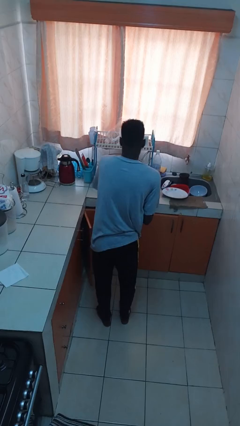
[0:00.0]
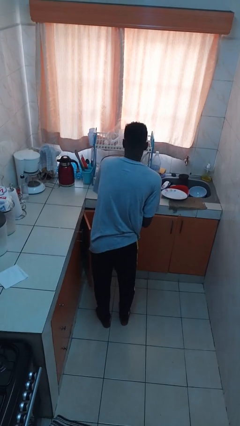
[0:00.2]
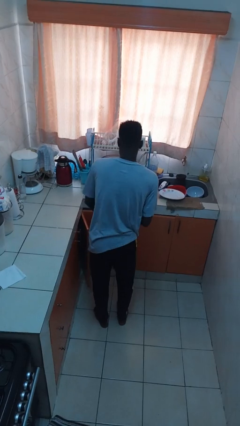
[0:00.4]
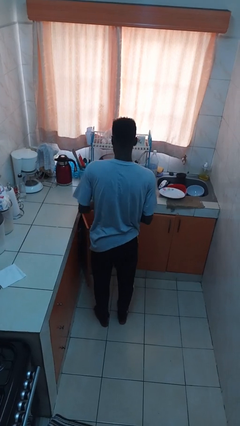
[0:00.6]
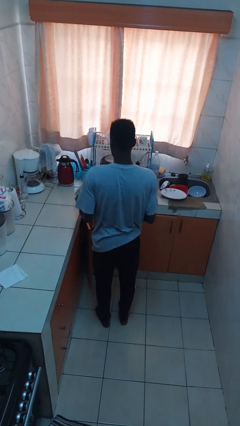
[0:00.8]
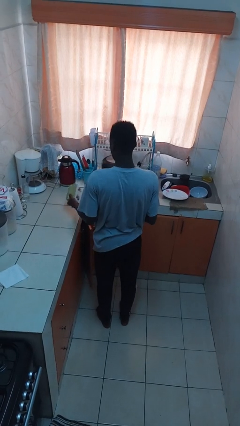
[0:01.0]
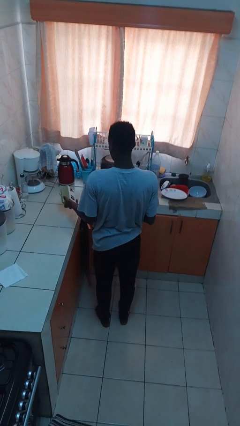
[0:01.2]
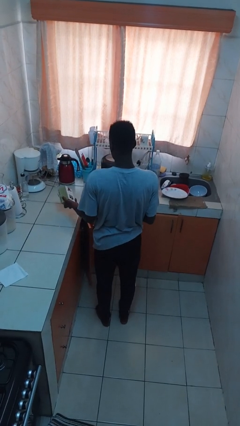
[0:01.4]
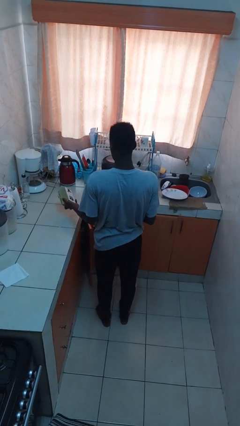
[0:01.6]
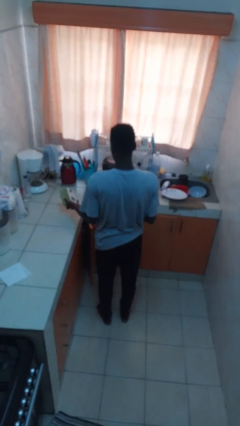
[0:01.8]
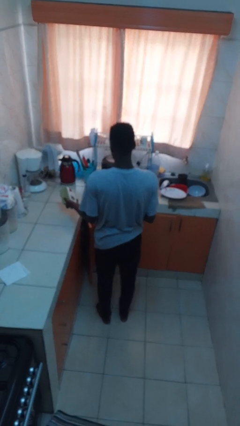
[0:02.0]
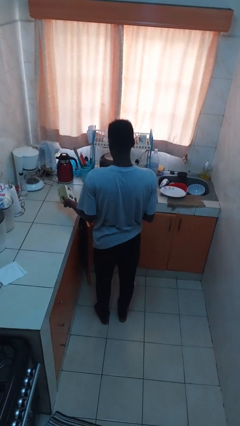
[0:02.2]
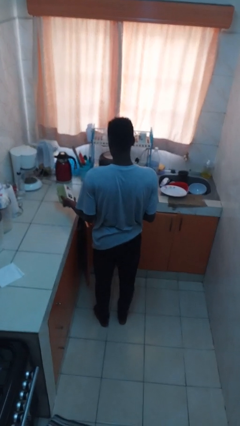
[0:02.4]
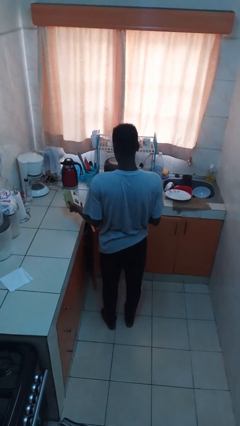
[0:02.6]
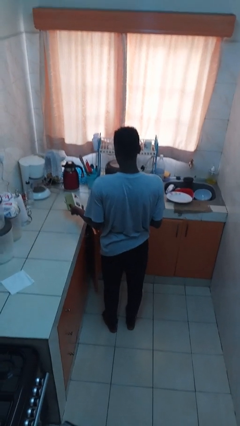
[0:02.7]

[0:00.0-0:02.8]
person takes object from bag

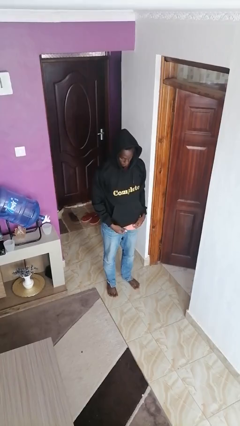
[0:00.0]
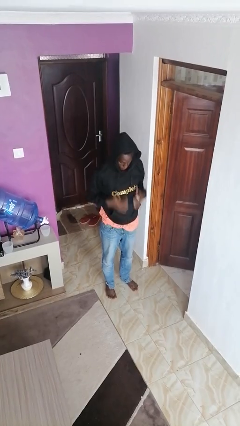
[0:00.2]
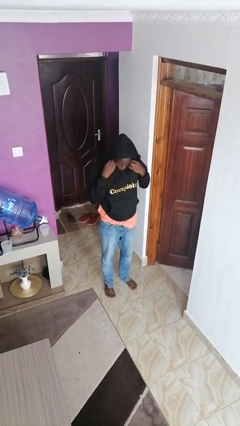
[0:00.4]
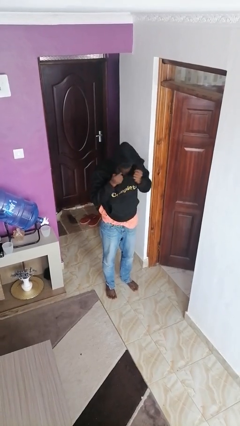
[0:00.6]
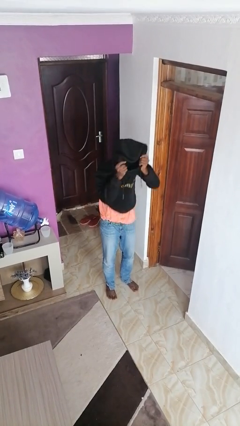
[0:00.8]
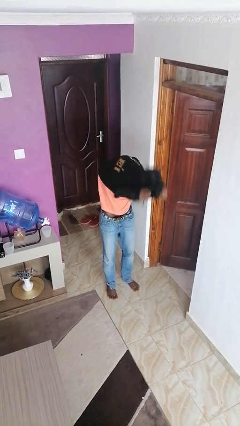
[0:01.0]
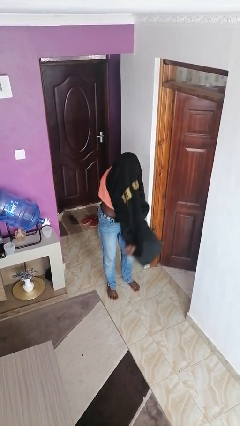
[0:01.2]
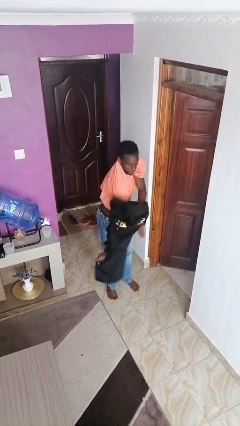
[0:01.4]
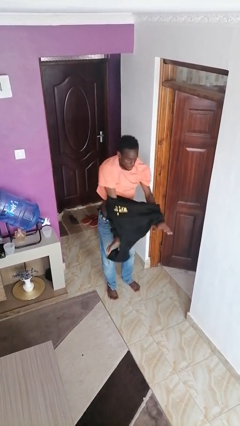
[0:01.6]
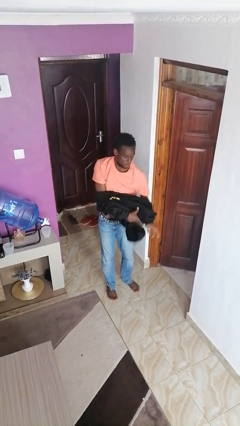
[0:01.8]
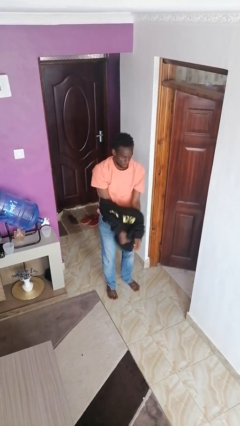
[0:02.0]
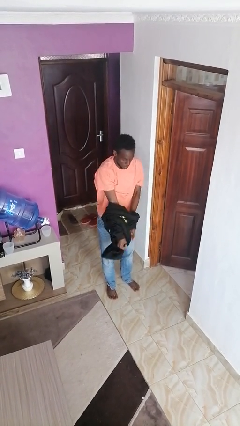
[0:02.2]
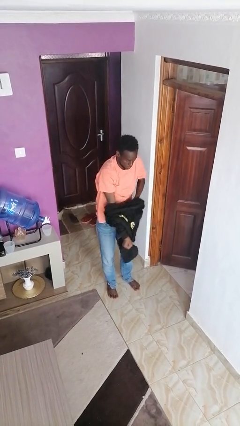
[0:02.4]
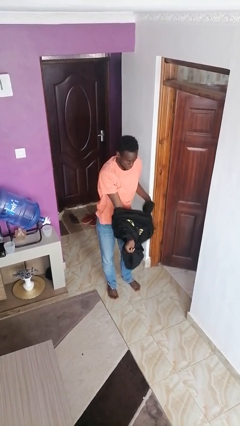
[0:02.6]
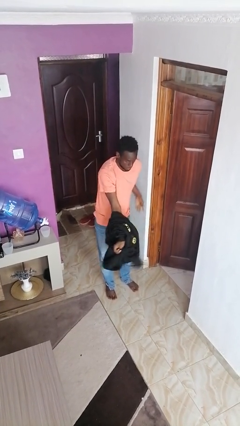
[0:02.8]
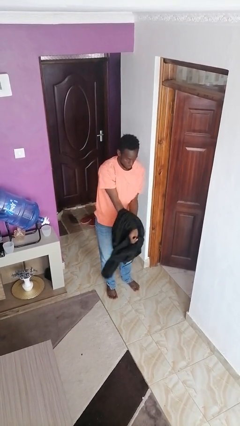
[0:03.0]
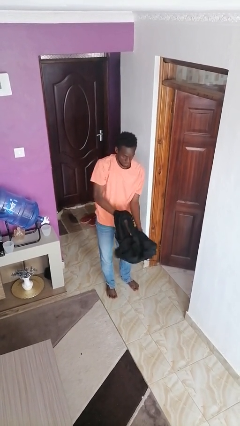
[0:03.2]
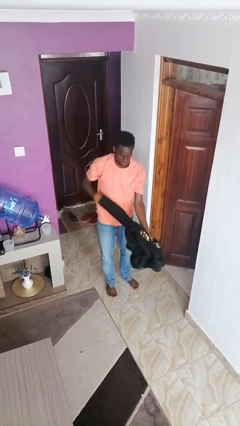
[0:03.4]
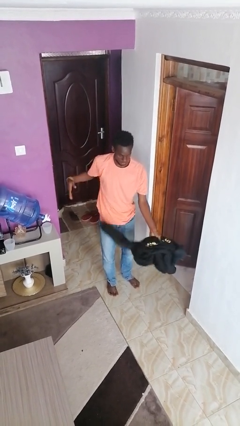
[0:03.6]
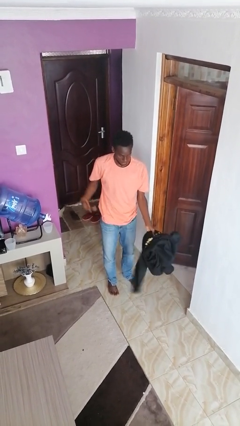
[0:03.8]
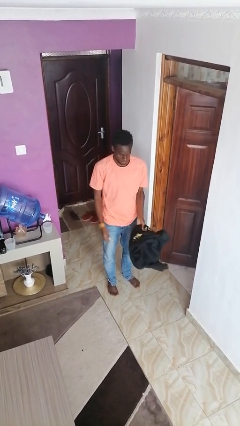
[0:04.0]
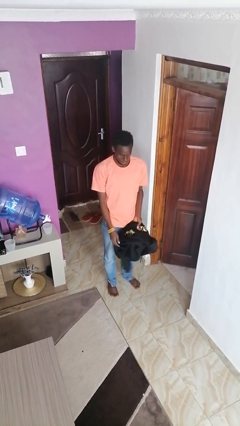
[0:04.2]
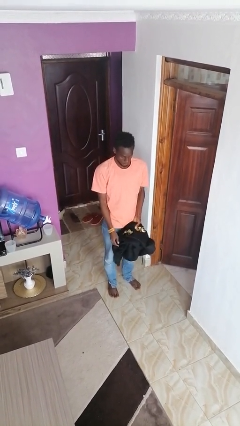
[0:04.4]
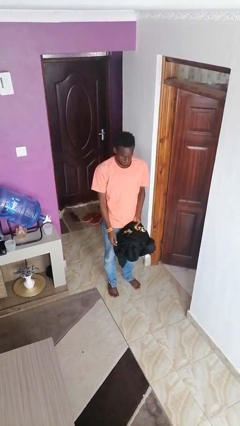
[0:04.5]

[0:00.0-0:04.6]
person takes off hoodie

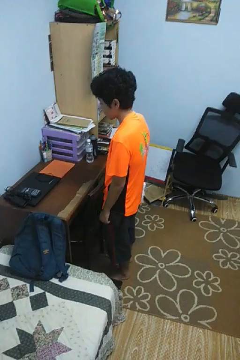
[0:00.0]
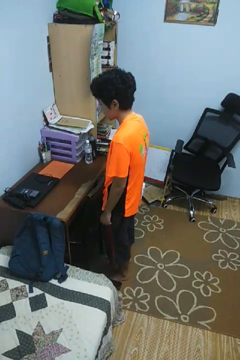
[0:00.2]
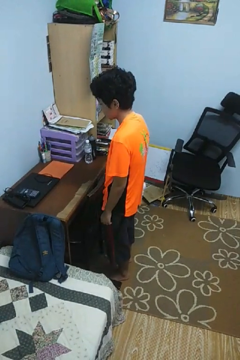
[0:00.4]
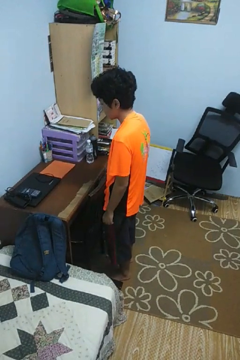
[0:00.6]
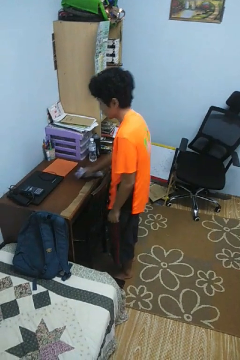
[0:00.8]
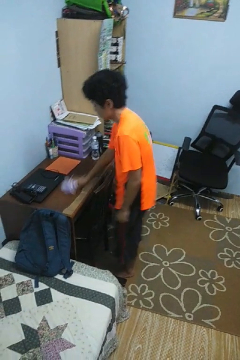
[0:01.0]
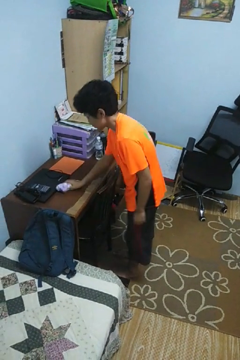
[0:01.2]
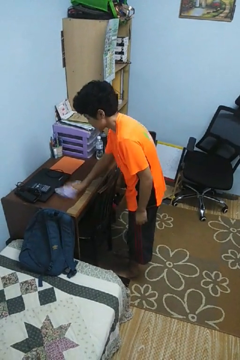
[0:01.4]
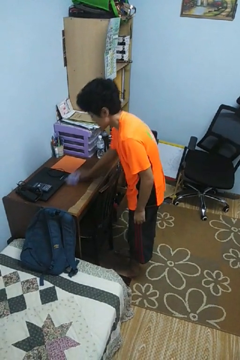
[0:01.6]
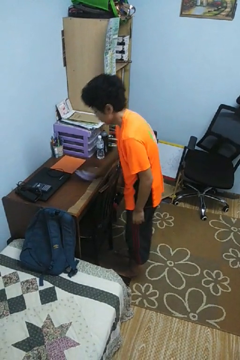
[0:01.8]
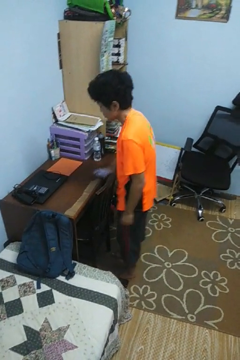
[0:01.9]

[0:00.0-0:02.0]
person cleans table with rag

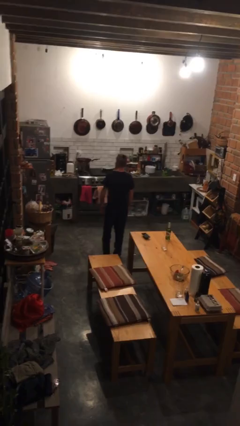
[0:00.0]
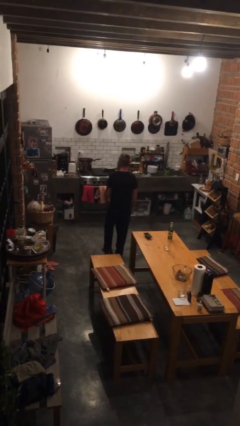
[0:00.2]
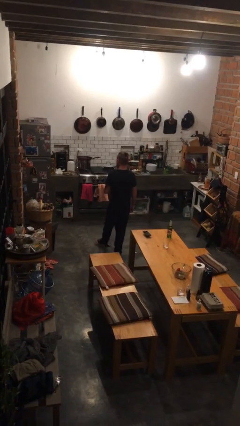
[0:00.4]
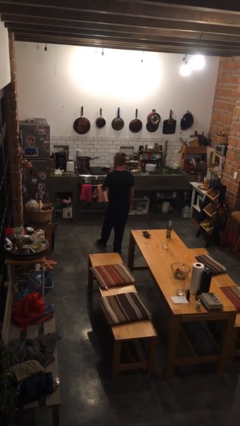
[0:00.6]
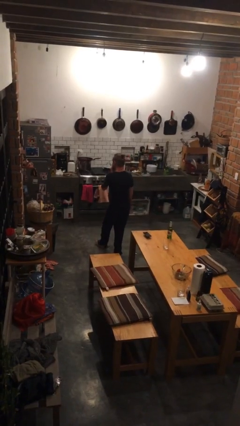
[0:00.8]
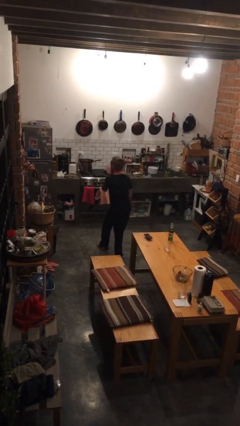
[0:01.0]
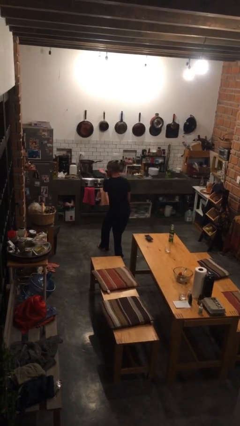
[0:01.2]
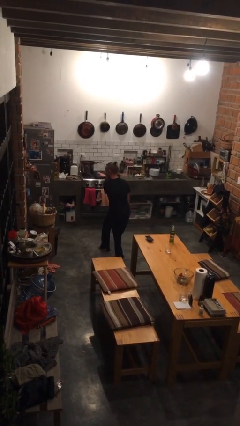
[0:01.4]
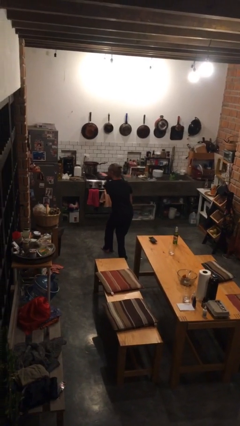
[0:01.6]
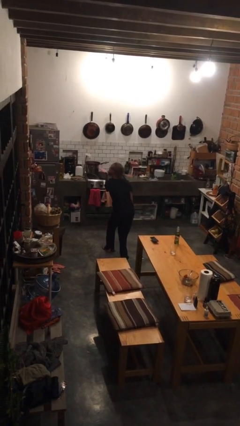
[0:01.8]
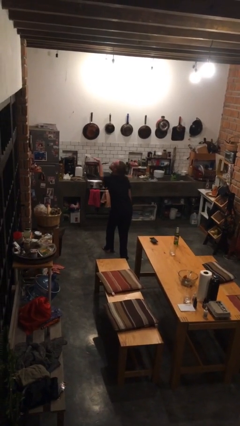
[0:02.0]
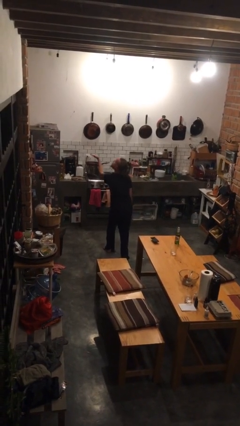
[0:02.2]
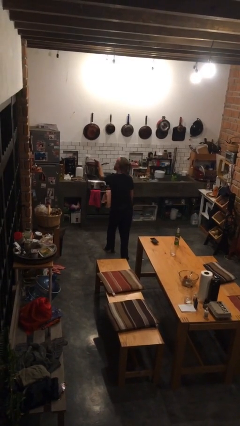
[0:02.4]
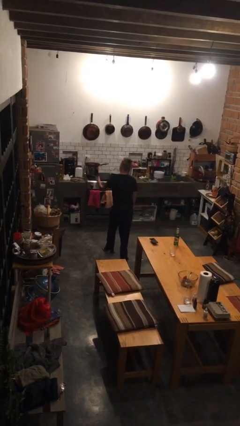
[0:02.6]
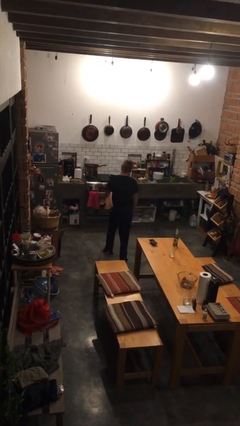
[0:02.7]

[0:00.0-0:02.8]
person gestures blow kiss

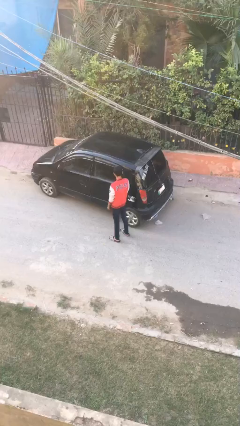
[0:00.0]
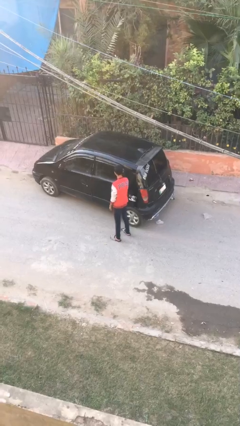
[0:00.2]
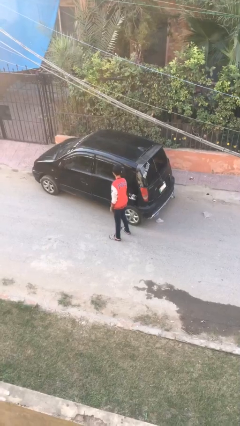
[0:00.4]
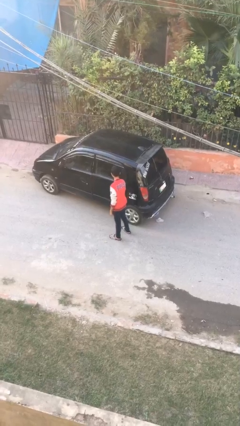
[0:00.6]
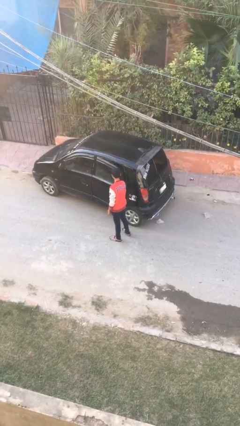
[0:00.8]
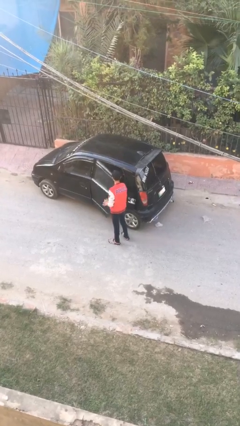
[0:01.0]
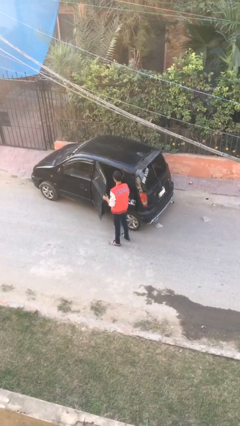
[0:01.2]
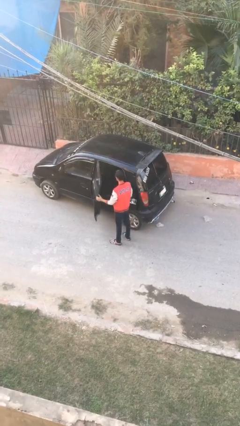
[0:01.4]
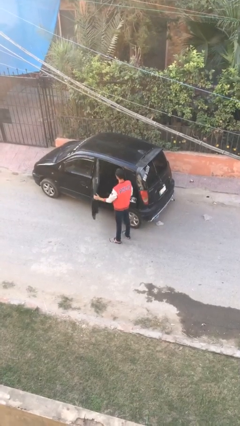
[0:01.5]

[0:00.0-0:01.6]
person opens car door

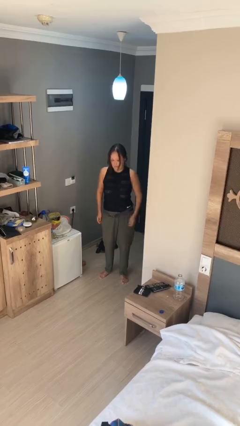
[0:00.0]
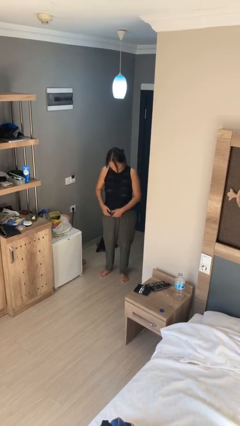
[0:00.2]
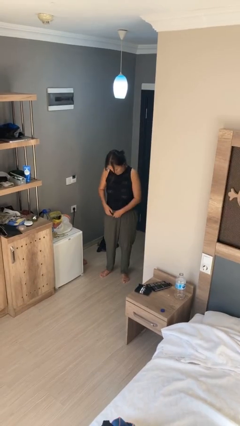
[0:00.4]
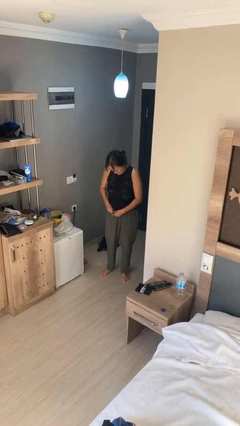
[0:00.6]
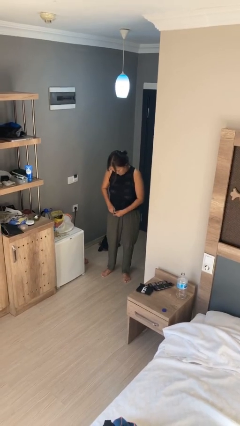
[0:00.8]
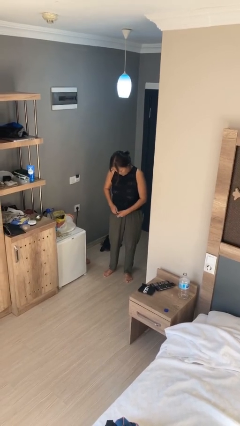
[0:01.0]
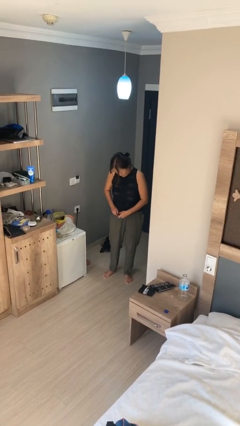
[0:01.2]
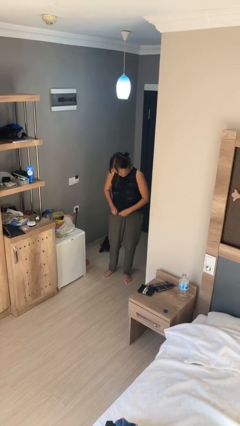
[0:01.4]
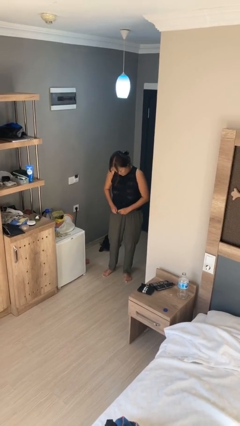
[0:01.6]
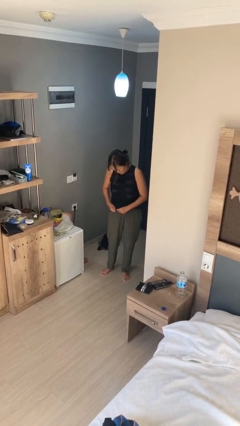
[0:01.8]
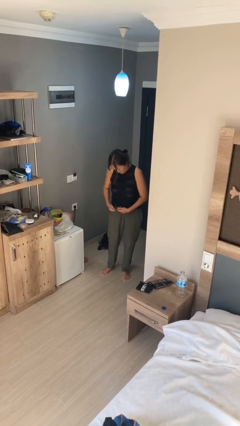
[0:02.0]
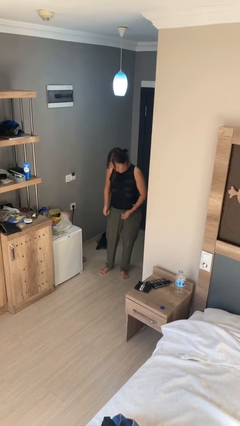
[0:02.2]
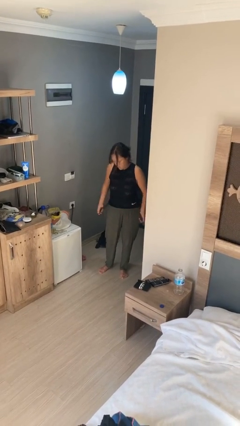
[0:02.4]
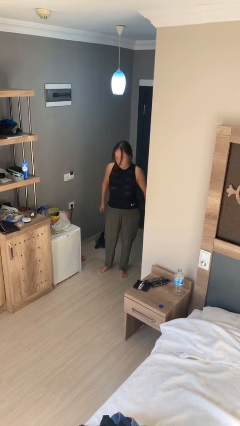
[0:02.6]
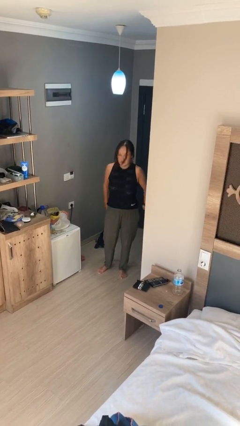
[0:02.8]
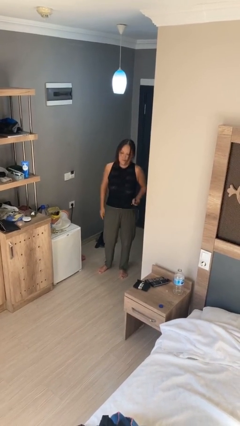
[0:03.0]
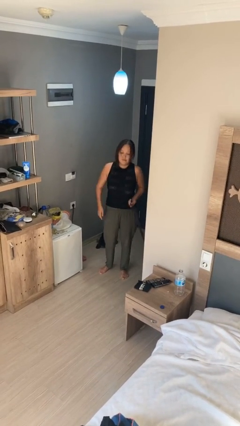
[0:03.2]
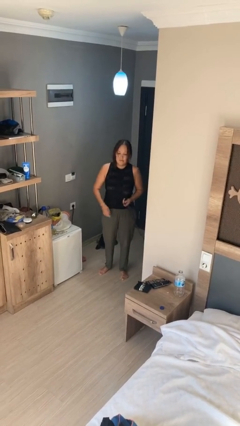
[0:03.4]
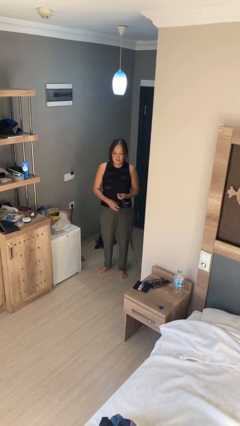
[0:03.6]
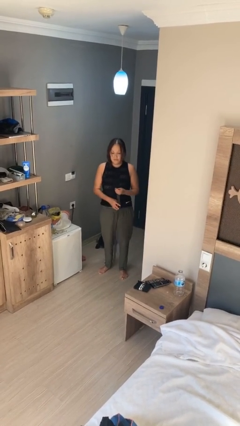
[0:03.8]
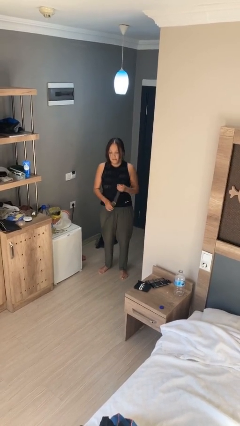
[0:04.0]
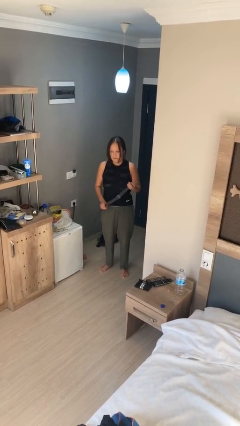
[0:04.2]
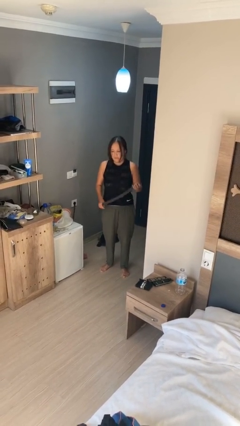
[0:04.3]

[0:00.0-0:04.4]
person takes off belt
